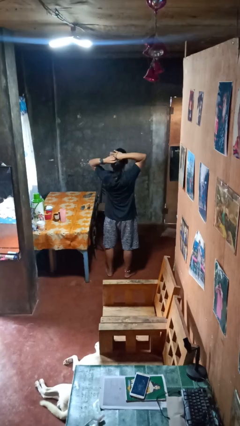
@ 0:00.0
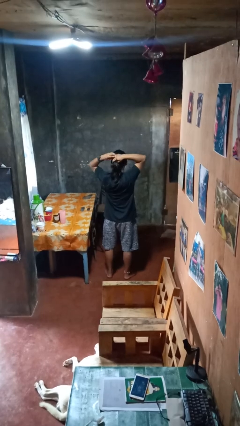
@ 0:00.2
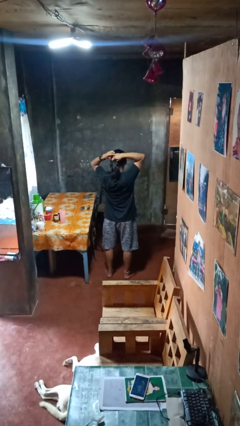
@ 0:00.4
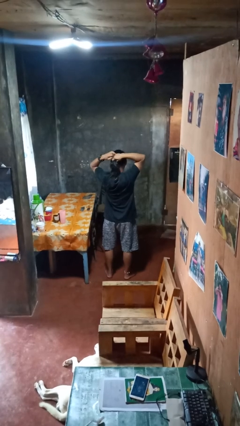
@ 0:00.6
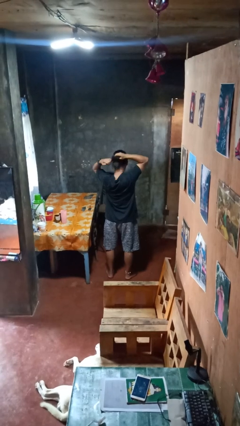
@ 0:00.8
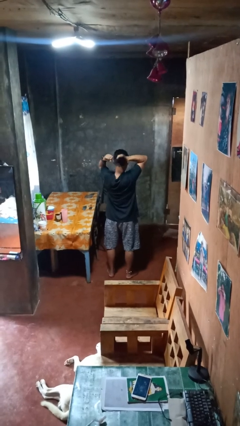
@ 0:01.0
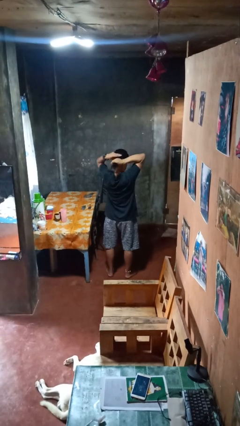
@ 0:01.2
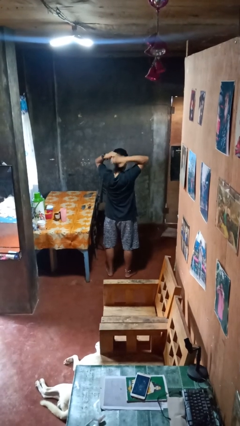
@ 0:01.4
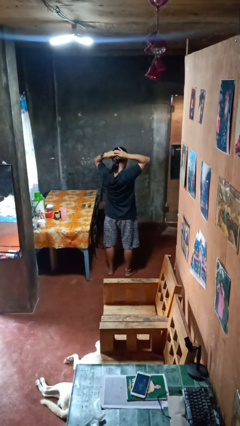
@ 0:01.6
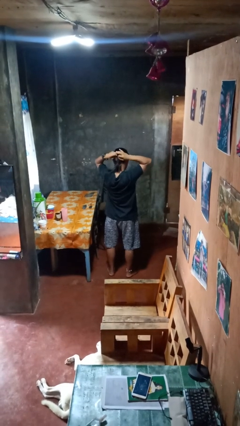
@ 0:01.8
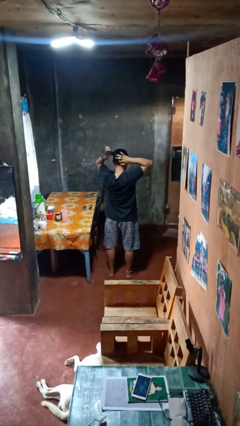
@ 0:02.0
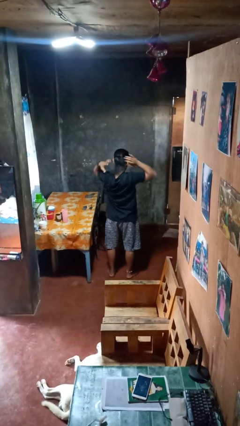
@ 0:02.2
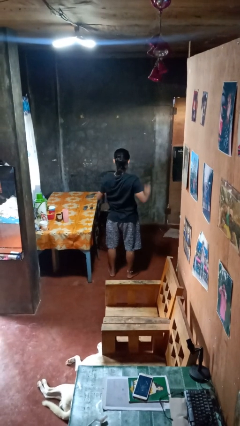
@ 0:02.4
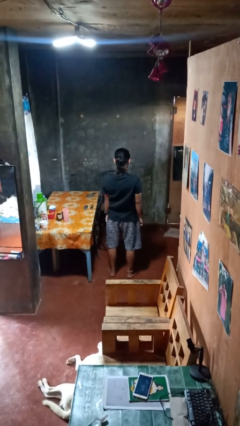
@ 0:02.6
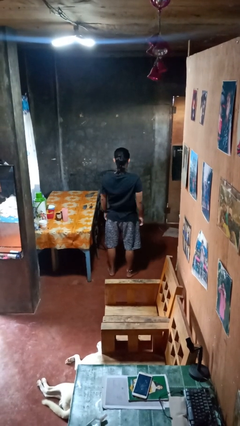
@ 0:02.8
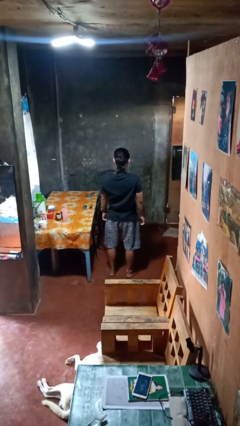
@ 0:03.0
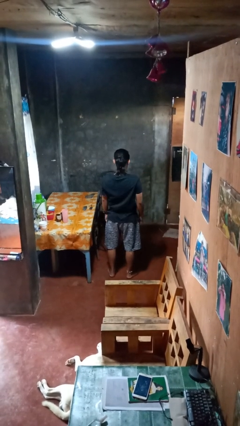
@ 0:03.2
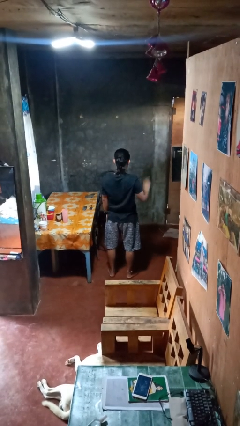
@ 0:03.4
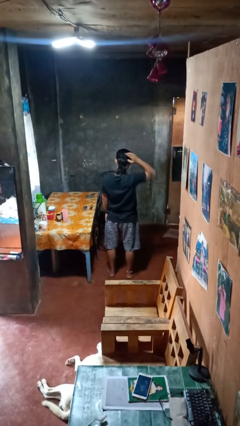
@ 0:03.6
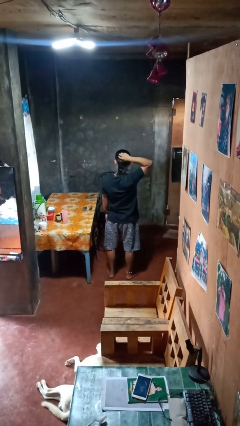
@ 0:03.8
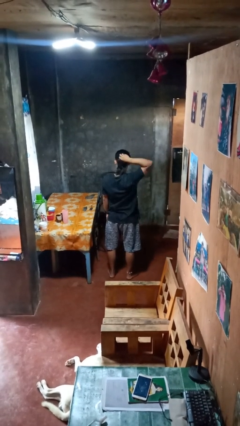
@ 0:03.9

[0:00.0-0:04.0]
person puts hair in ponytail

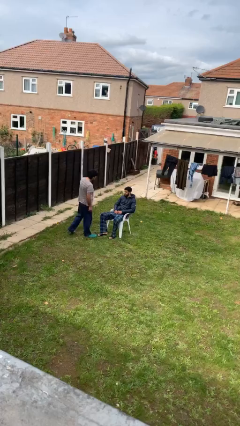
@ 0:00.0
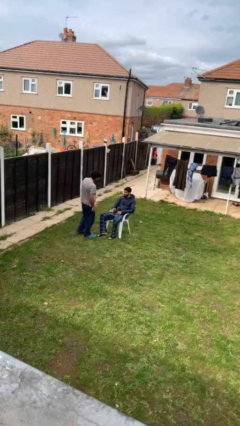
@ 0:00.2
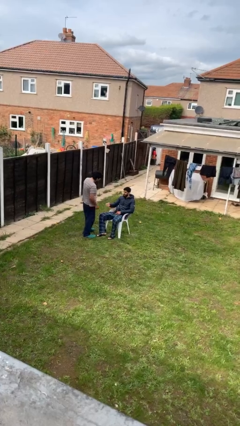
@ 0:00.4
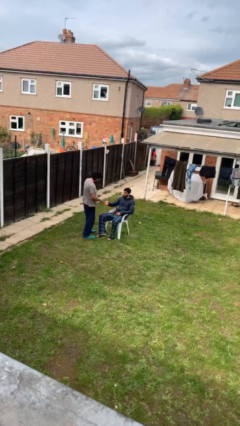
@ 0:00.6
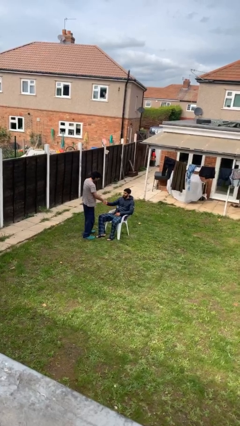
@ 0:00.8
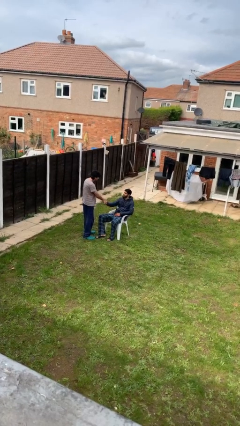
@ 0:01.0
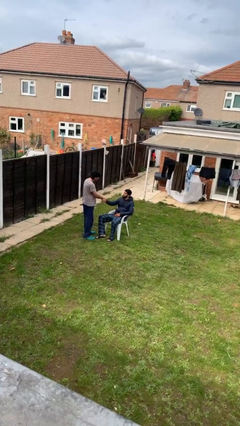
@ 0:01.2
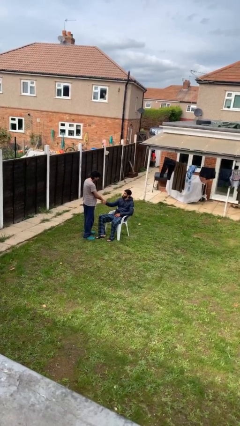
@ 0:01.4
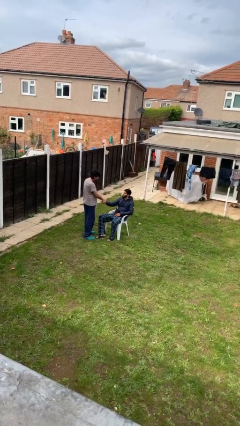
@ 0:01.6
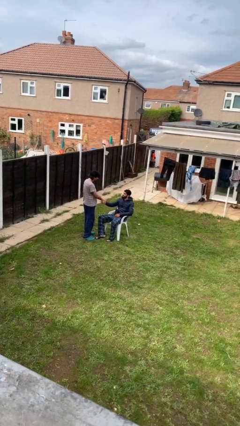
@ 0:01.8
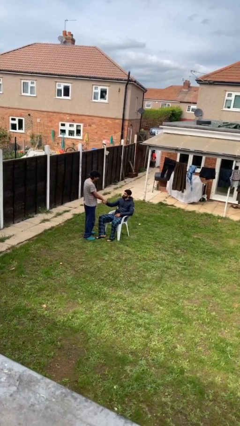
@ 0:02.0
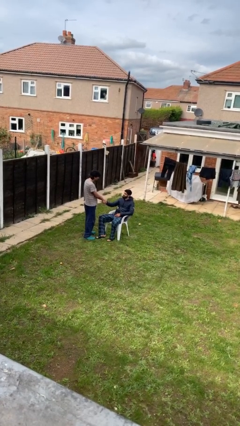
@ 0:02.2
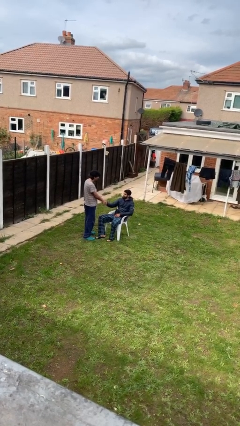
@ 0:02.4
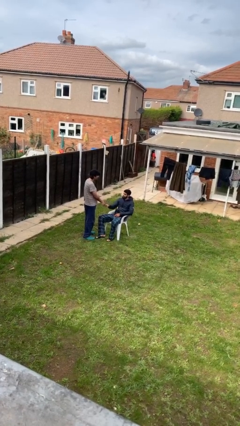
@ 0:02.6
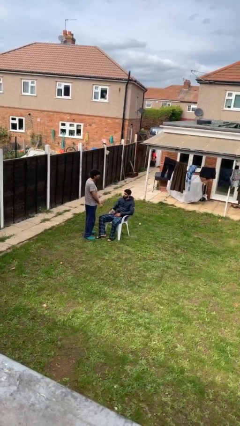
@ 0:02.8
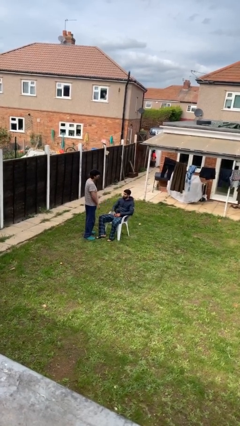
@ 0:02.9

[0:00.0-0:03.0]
person shakes hand

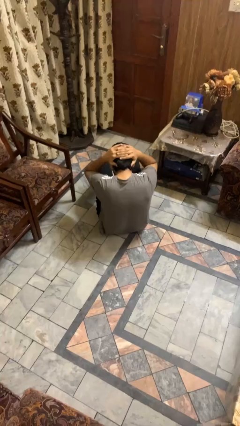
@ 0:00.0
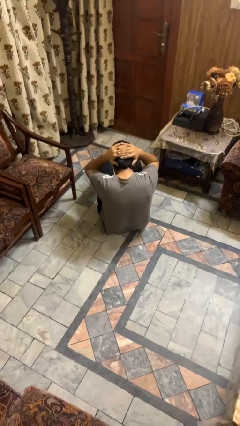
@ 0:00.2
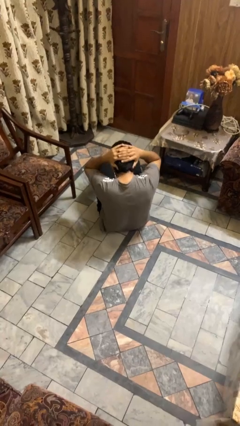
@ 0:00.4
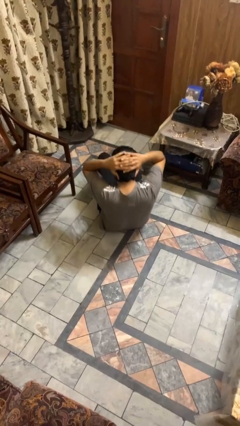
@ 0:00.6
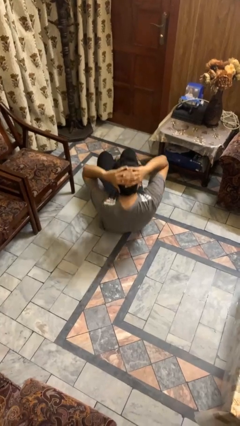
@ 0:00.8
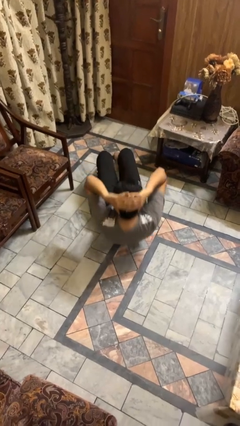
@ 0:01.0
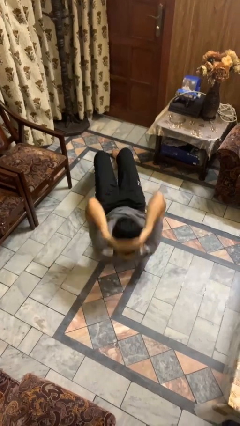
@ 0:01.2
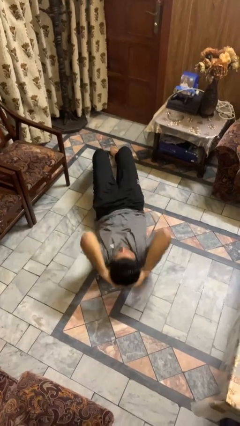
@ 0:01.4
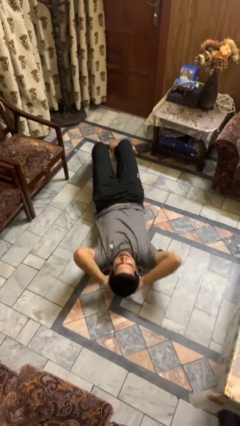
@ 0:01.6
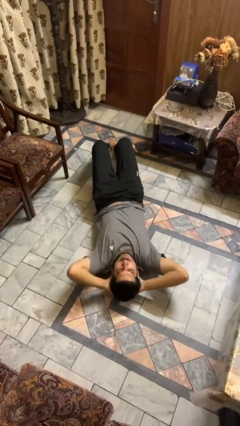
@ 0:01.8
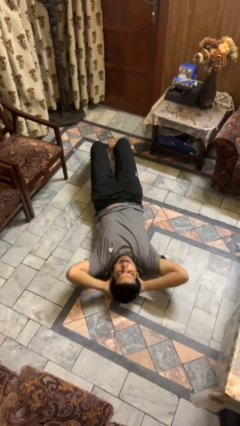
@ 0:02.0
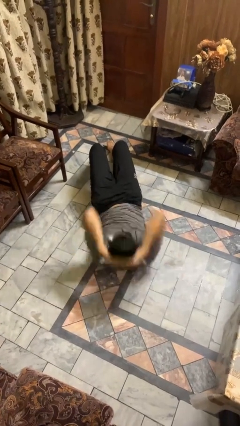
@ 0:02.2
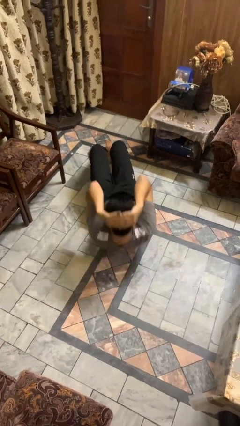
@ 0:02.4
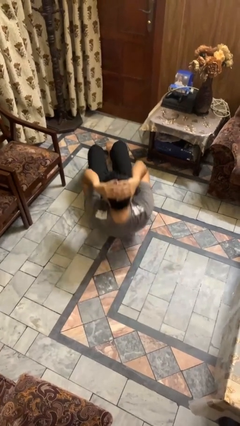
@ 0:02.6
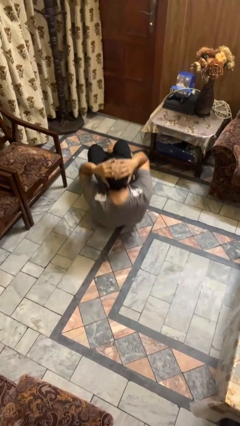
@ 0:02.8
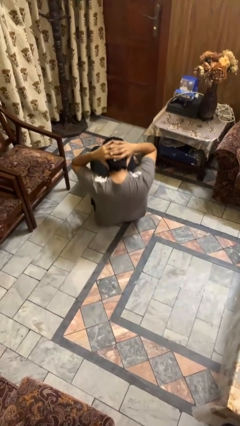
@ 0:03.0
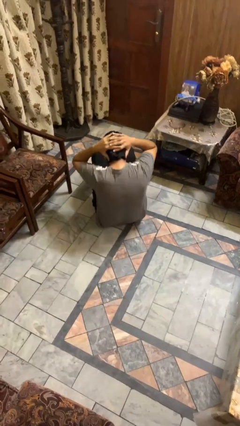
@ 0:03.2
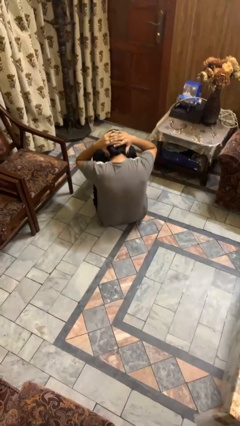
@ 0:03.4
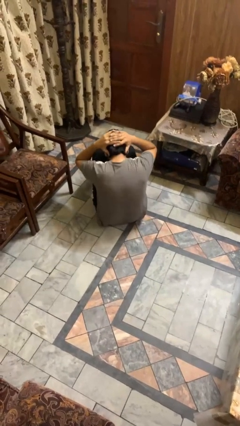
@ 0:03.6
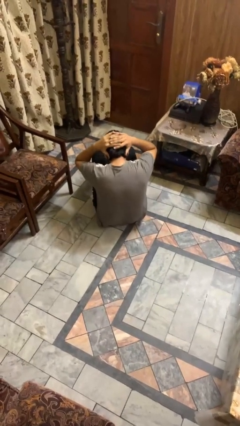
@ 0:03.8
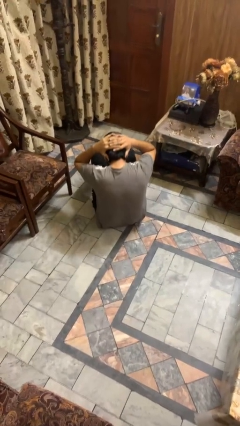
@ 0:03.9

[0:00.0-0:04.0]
person exercises with situp

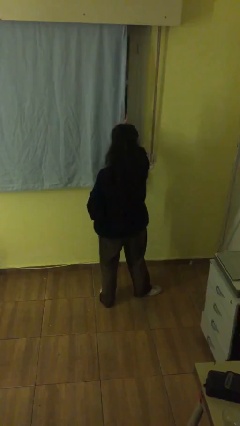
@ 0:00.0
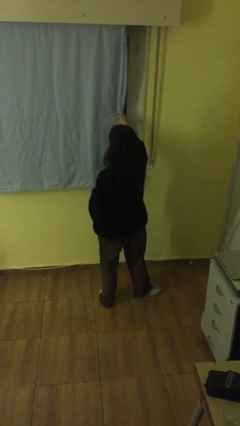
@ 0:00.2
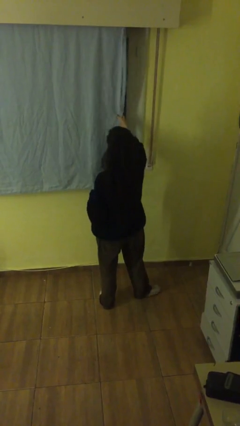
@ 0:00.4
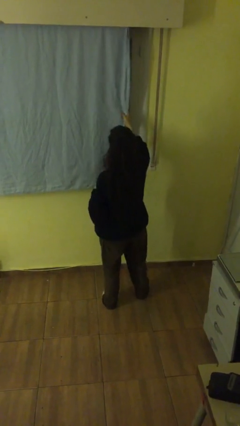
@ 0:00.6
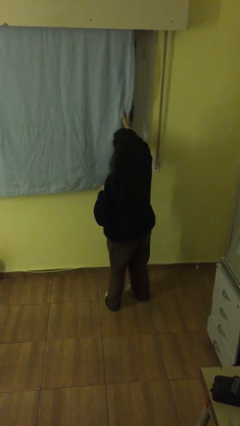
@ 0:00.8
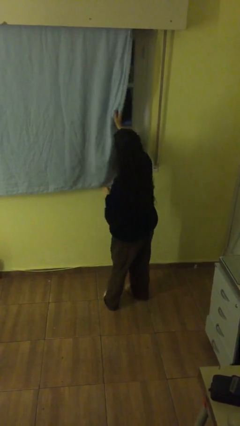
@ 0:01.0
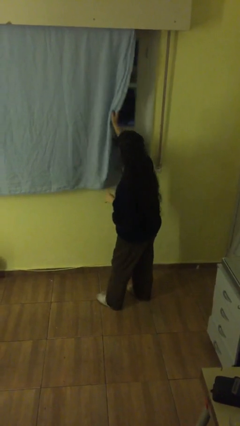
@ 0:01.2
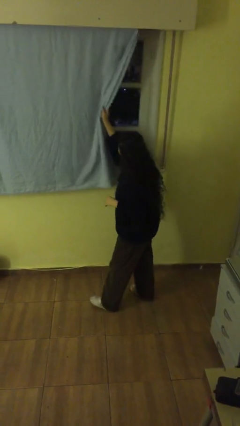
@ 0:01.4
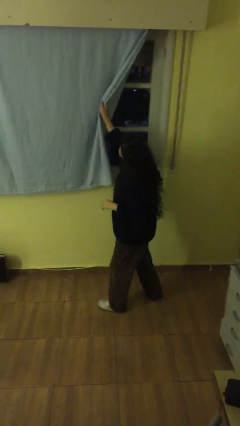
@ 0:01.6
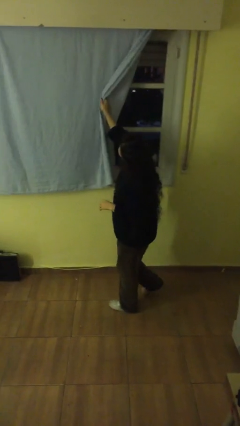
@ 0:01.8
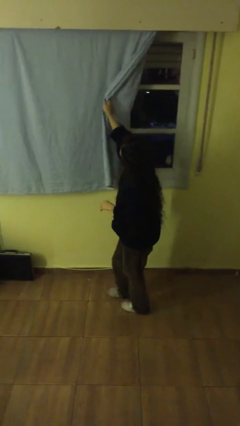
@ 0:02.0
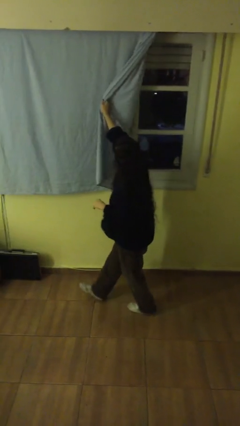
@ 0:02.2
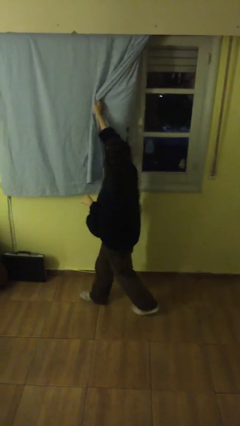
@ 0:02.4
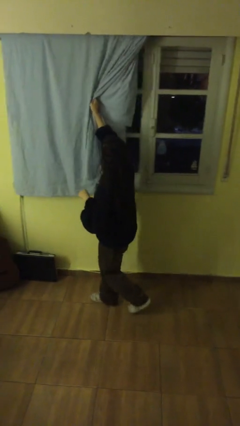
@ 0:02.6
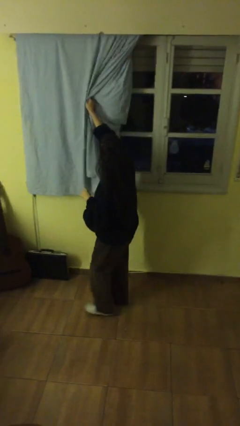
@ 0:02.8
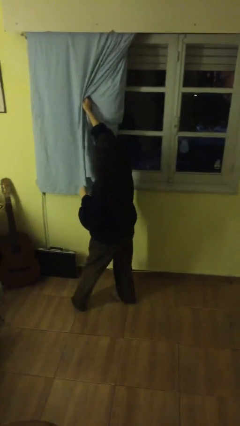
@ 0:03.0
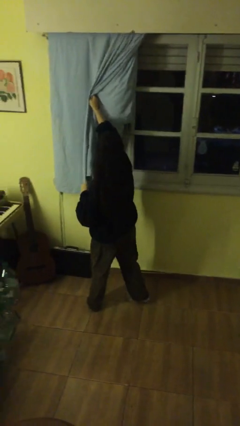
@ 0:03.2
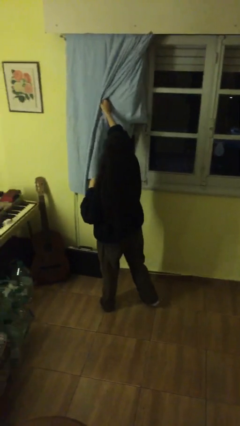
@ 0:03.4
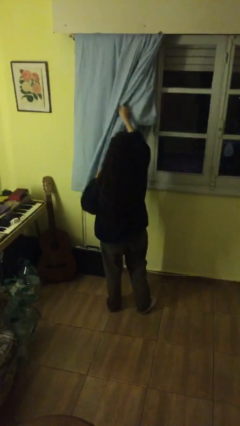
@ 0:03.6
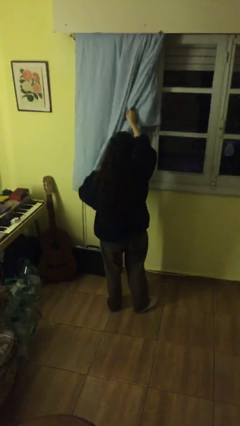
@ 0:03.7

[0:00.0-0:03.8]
person opens curtains

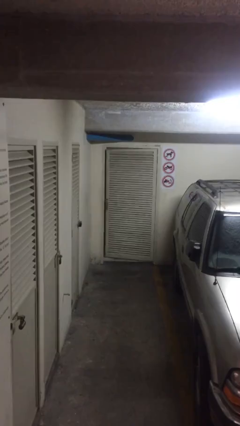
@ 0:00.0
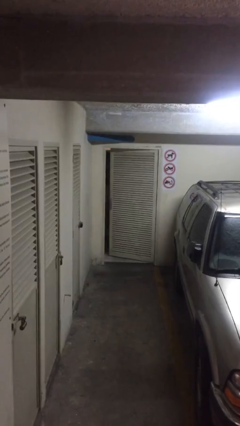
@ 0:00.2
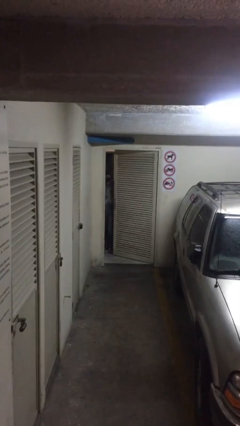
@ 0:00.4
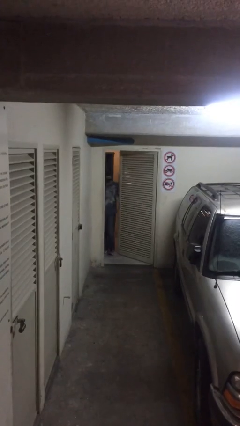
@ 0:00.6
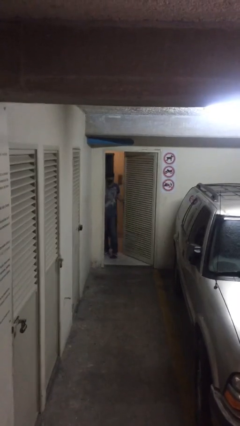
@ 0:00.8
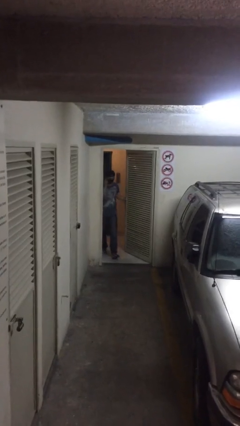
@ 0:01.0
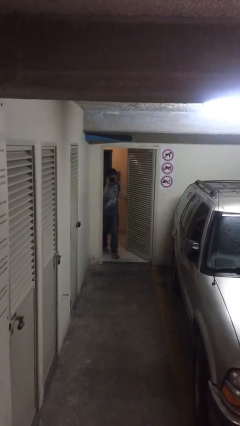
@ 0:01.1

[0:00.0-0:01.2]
person opens facility door

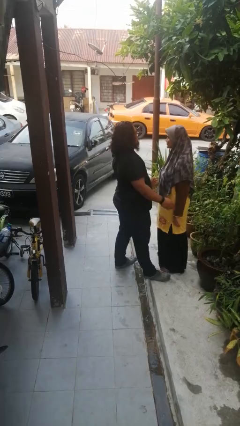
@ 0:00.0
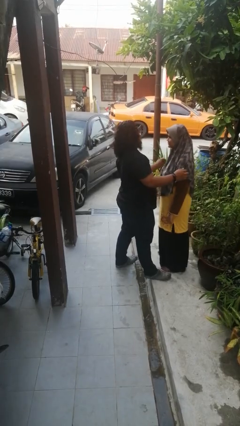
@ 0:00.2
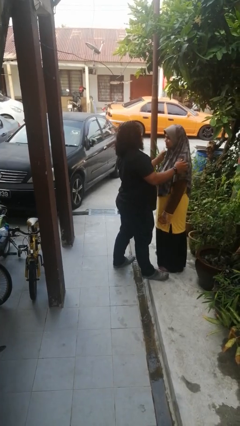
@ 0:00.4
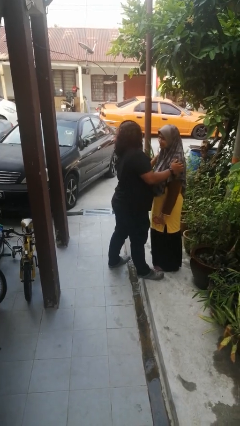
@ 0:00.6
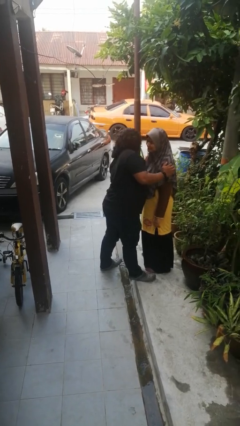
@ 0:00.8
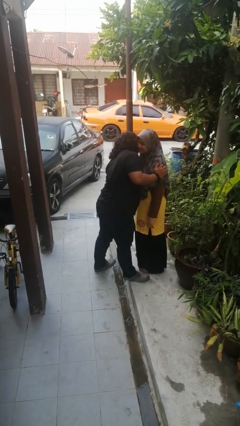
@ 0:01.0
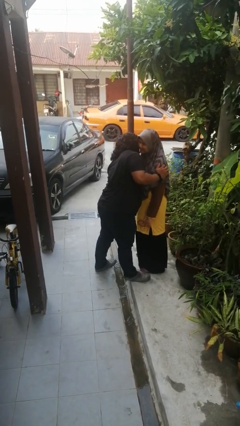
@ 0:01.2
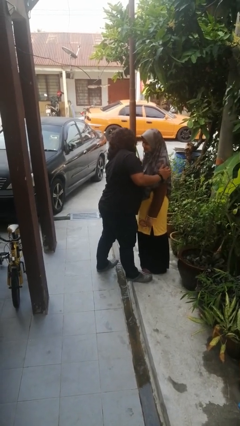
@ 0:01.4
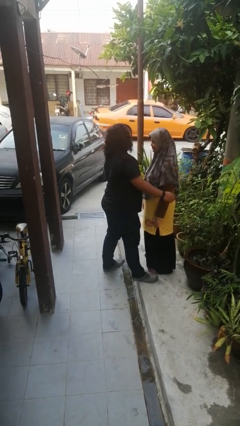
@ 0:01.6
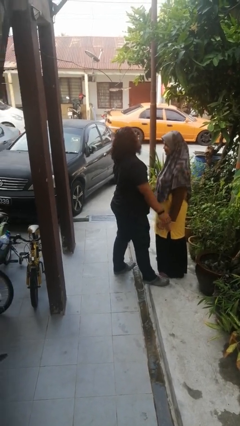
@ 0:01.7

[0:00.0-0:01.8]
person kisses cheek of person
